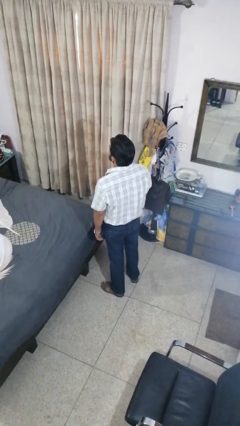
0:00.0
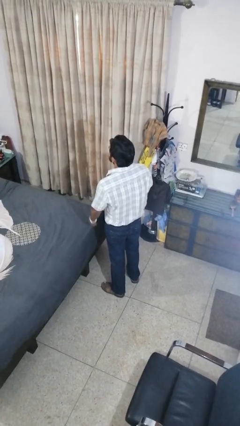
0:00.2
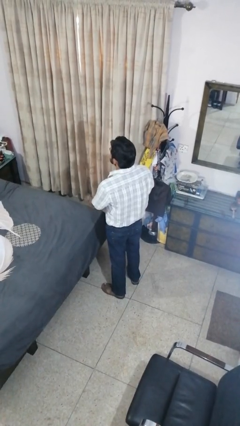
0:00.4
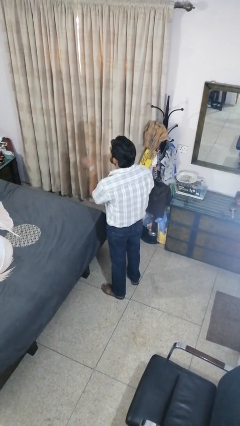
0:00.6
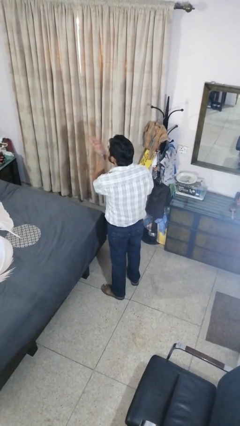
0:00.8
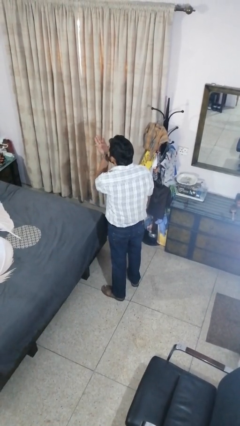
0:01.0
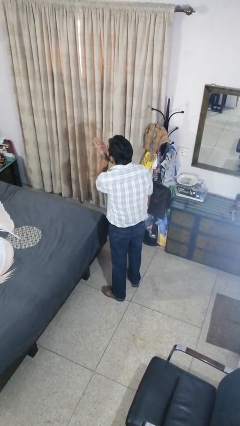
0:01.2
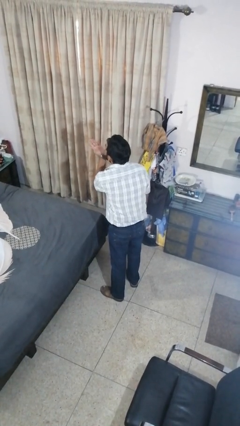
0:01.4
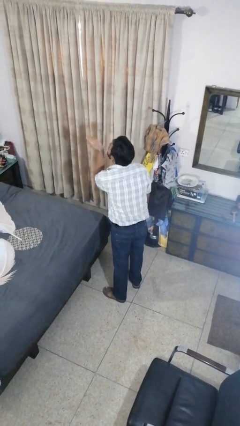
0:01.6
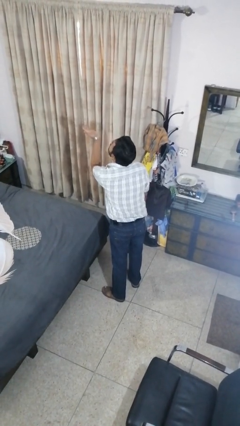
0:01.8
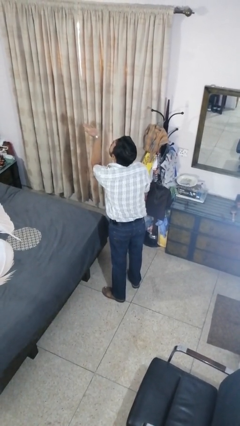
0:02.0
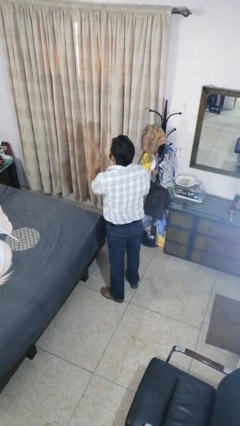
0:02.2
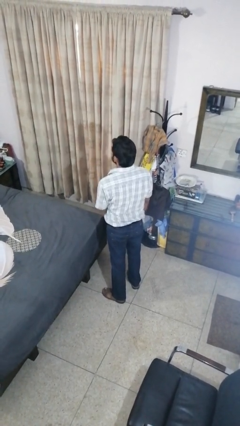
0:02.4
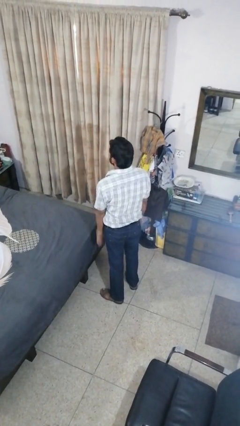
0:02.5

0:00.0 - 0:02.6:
person gestures blow kiss

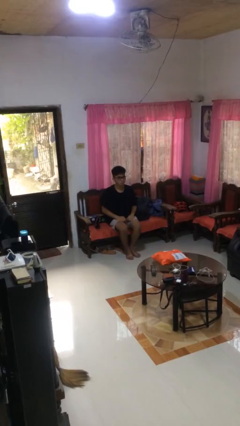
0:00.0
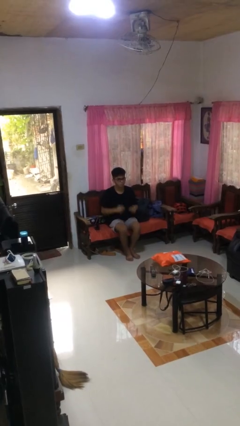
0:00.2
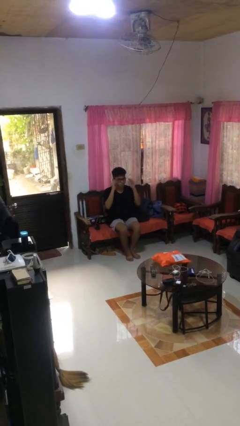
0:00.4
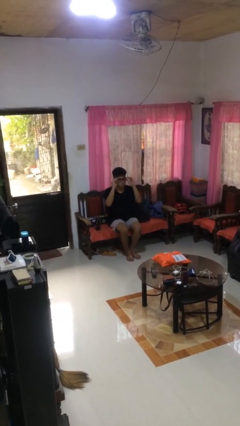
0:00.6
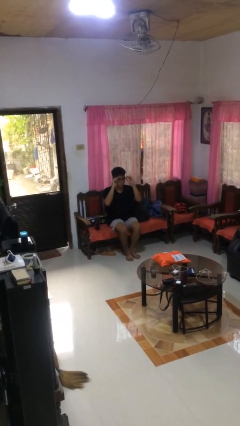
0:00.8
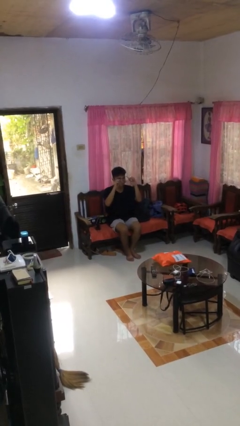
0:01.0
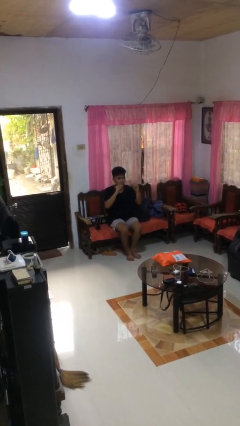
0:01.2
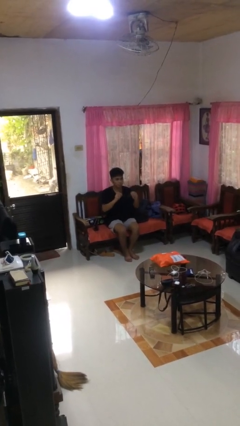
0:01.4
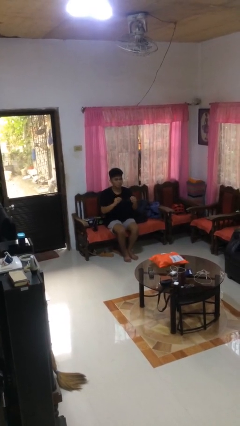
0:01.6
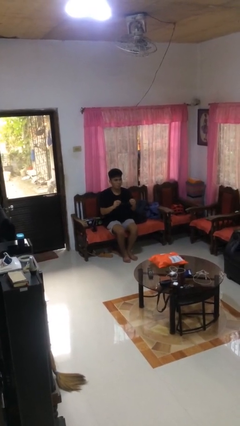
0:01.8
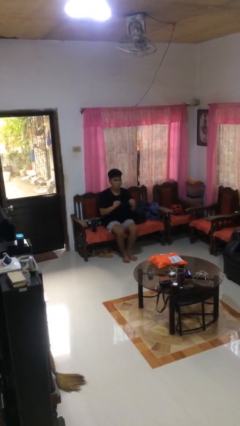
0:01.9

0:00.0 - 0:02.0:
person takes off glasses

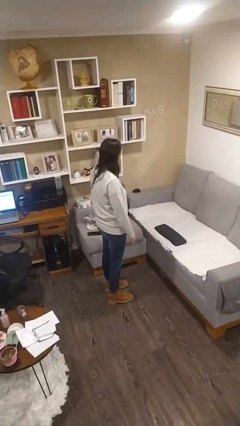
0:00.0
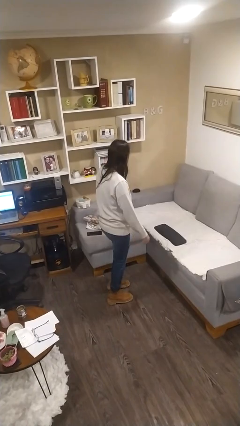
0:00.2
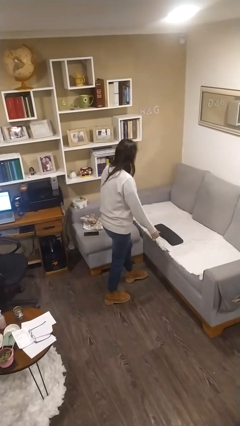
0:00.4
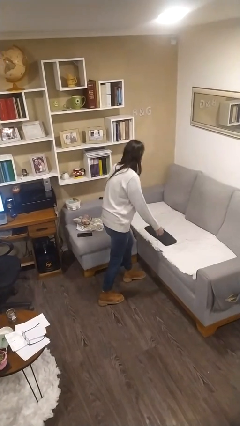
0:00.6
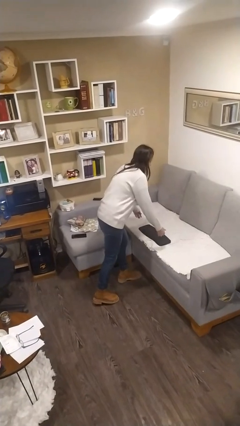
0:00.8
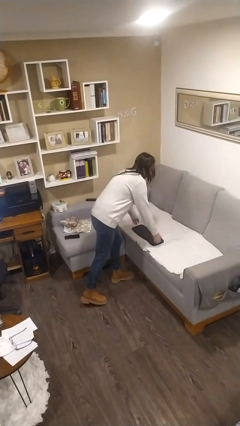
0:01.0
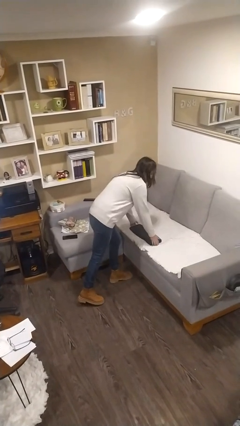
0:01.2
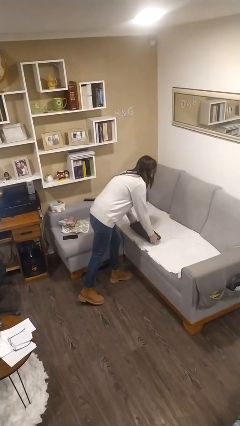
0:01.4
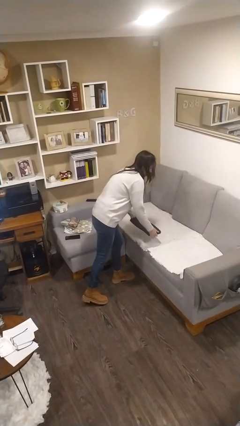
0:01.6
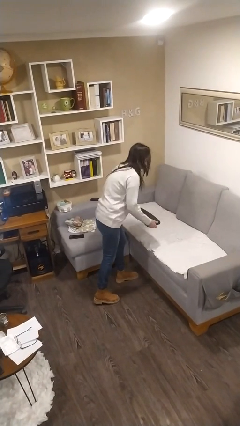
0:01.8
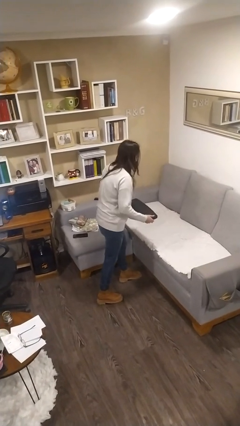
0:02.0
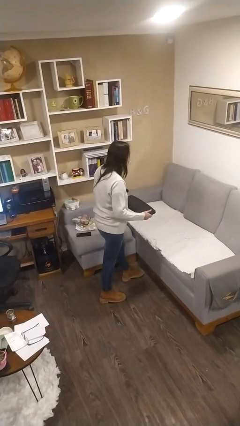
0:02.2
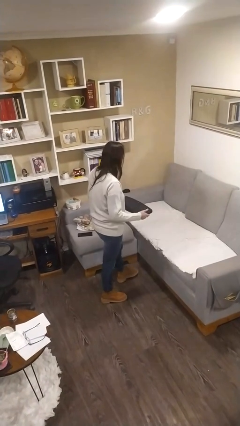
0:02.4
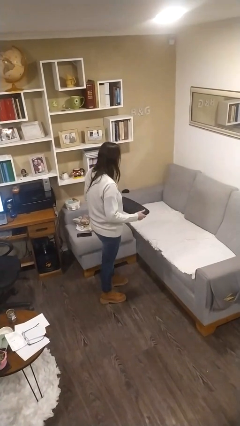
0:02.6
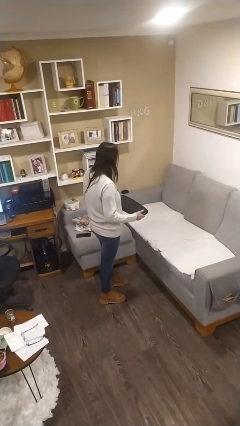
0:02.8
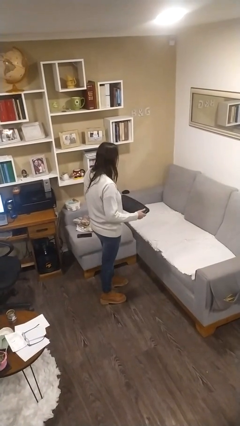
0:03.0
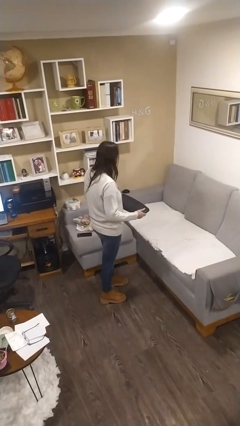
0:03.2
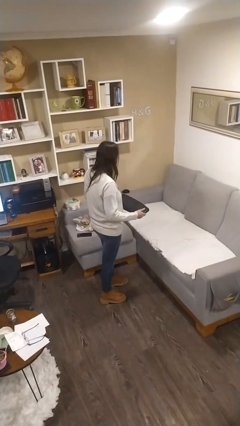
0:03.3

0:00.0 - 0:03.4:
person picks up object from couch

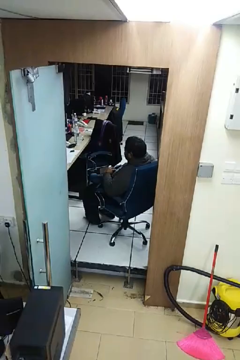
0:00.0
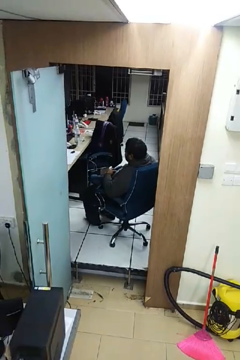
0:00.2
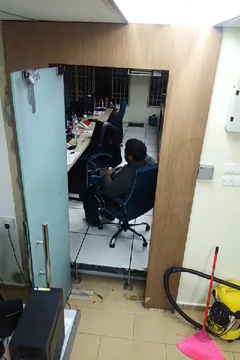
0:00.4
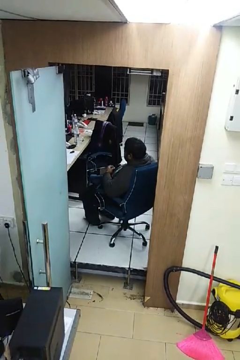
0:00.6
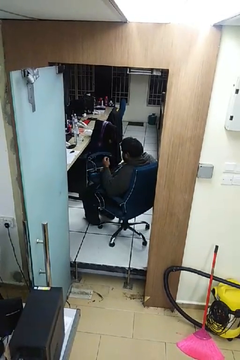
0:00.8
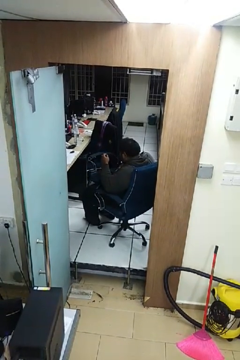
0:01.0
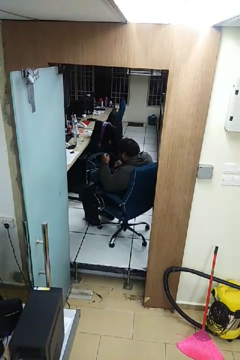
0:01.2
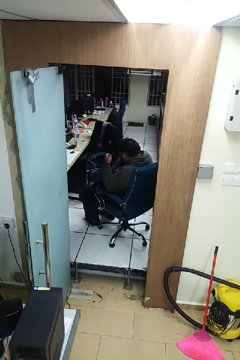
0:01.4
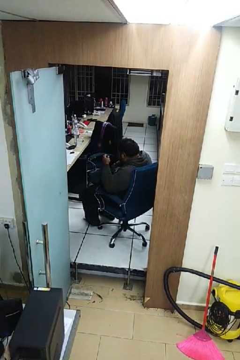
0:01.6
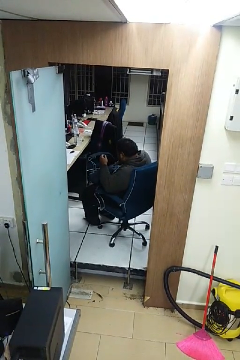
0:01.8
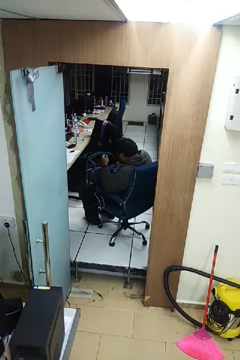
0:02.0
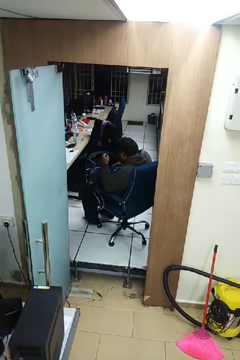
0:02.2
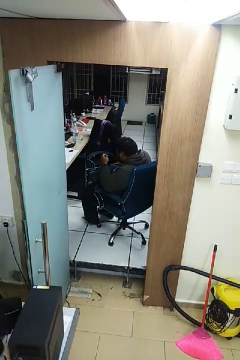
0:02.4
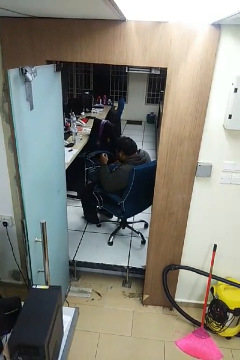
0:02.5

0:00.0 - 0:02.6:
person searches in backpack

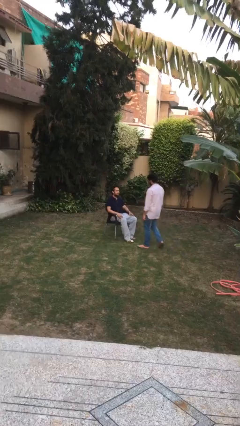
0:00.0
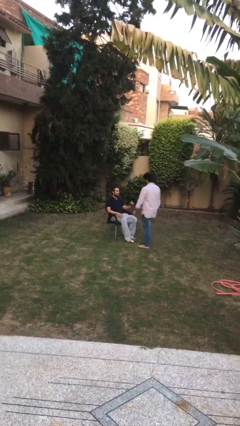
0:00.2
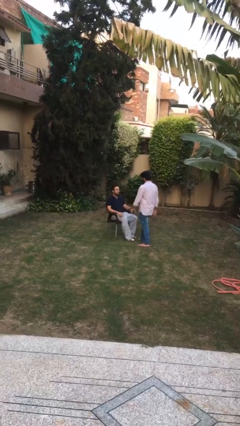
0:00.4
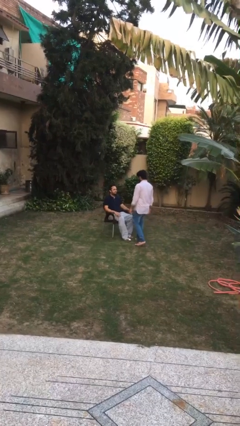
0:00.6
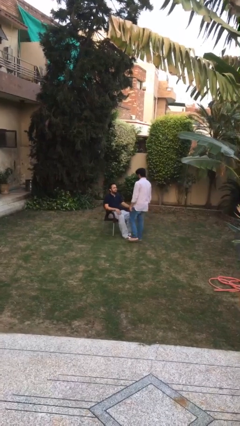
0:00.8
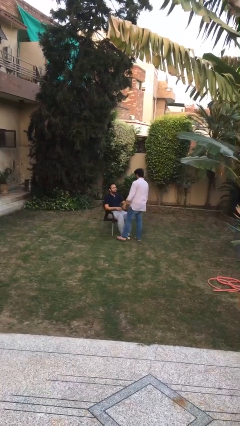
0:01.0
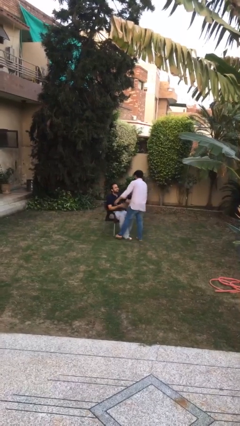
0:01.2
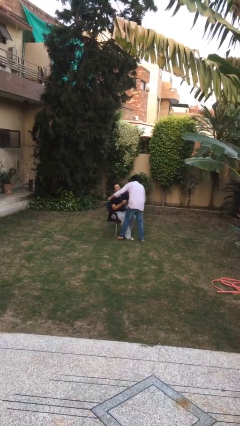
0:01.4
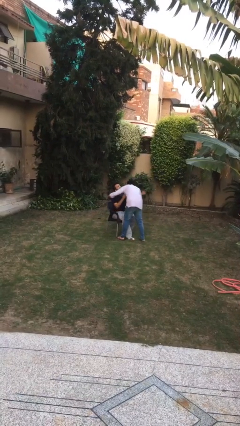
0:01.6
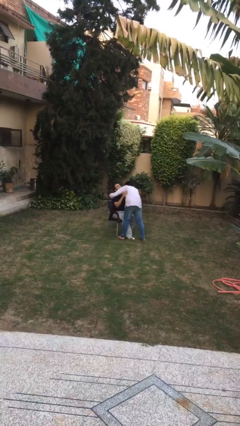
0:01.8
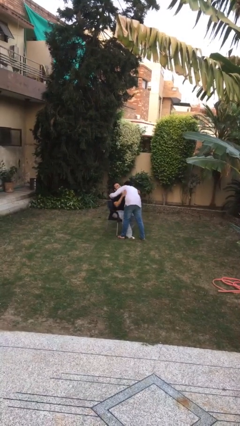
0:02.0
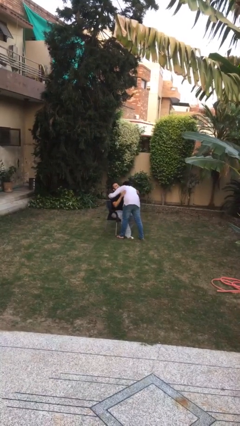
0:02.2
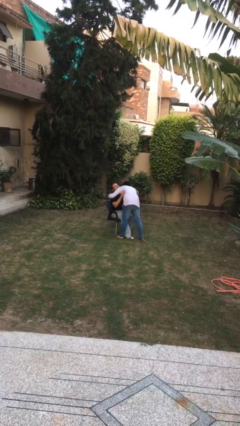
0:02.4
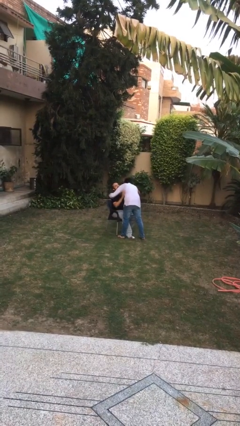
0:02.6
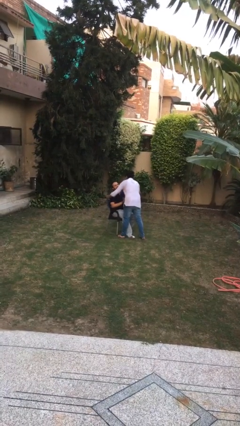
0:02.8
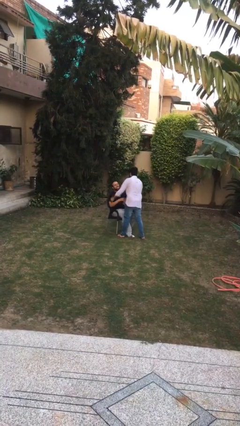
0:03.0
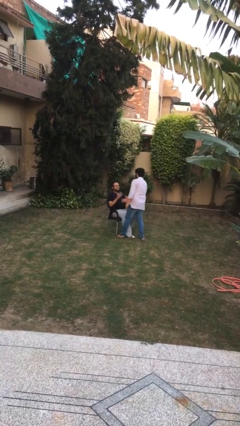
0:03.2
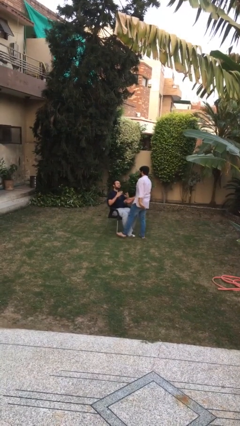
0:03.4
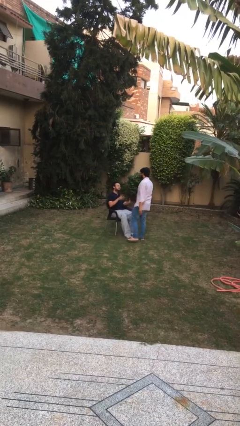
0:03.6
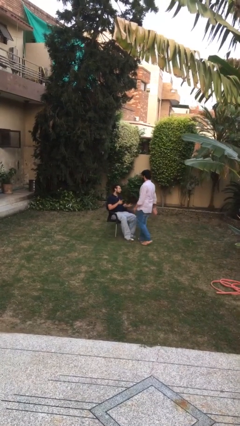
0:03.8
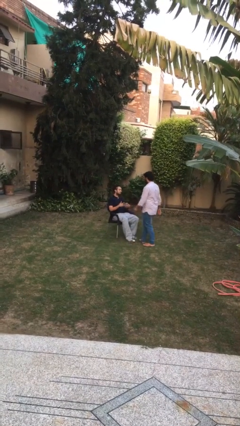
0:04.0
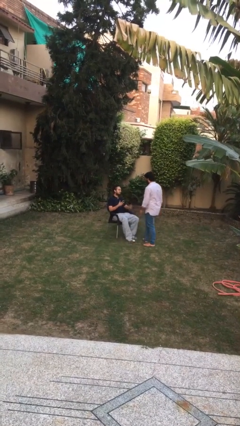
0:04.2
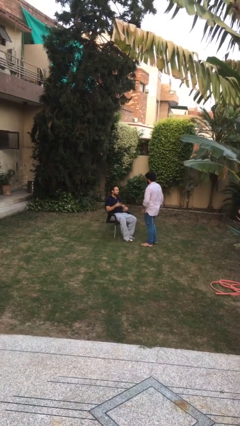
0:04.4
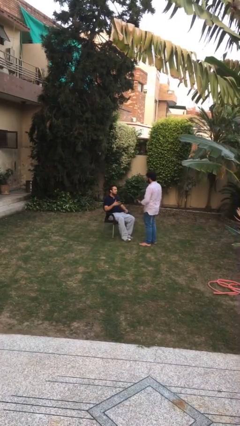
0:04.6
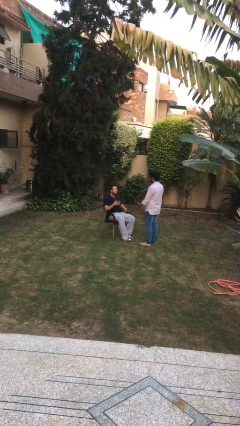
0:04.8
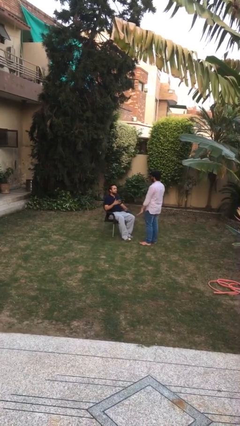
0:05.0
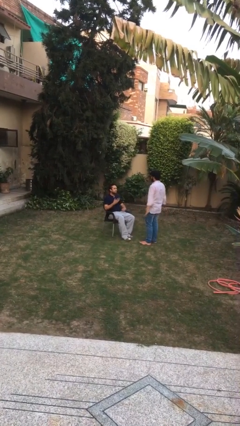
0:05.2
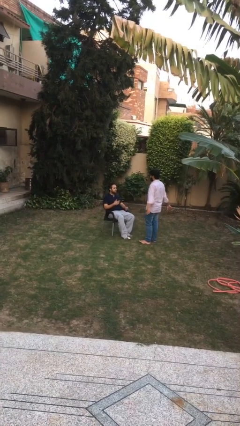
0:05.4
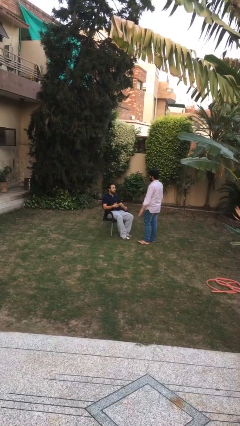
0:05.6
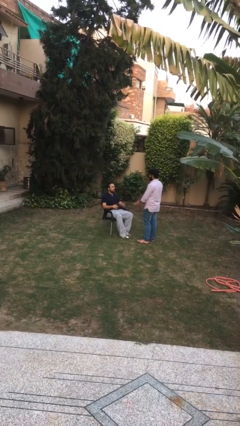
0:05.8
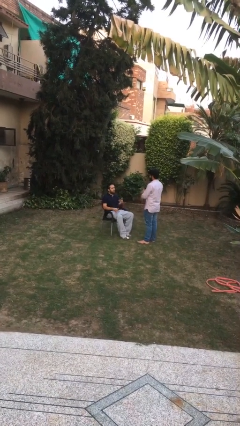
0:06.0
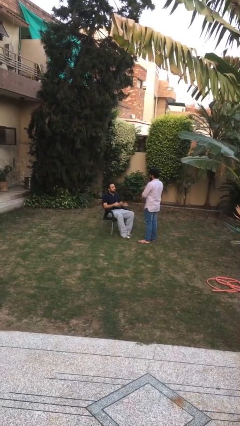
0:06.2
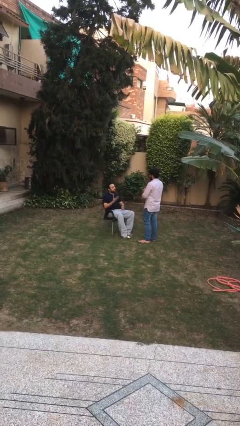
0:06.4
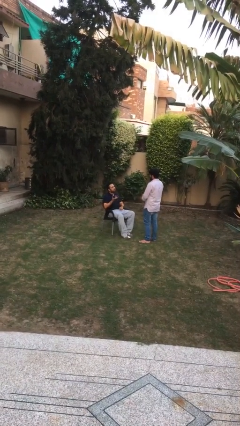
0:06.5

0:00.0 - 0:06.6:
person embraces person

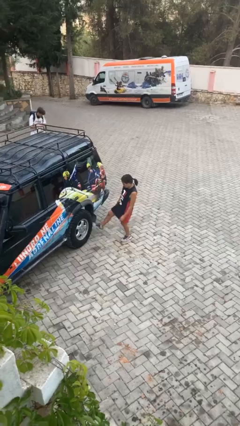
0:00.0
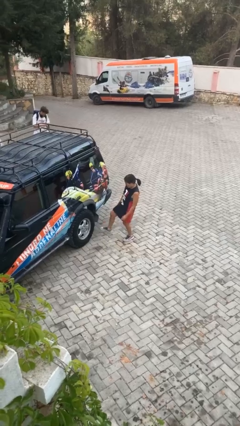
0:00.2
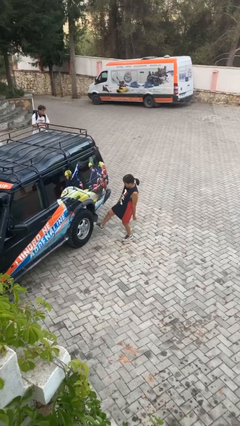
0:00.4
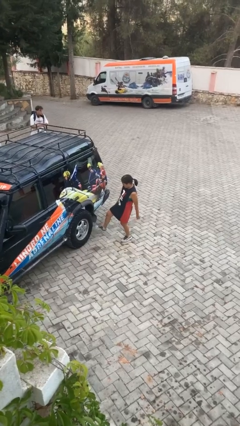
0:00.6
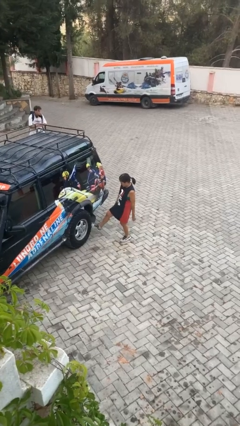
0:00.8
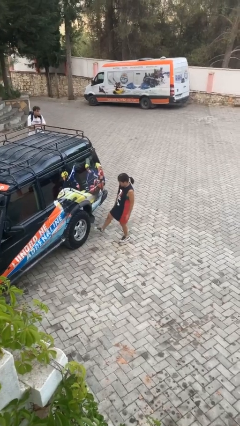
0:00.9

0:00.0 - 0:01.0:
person kicks car tires
